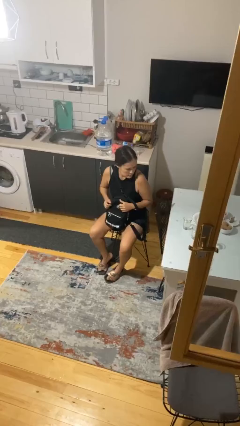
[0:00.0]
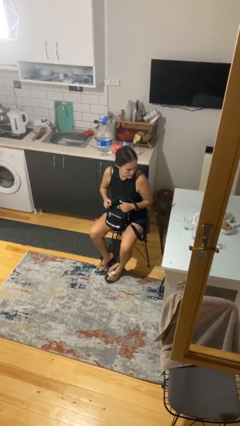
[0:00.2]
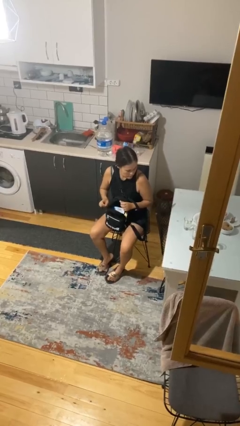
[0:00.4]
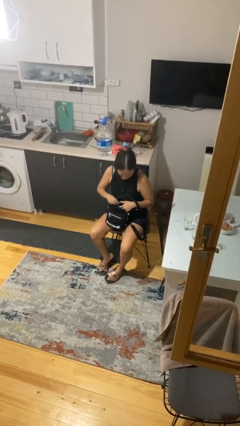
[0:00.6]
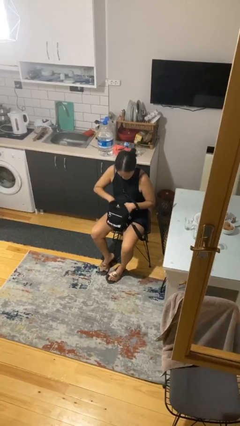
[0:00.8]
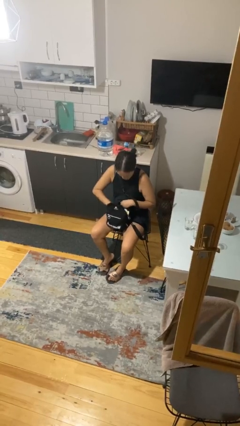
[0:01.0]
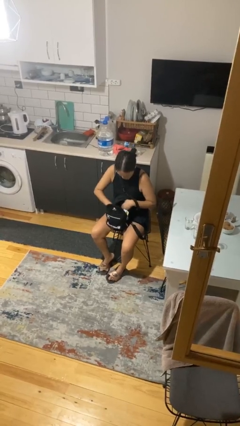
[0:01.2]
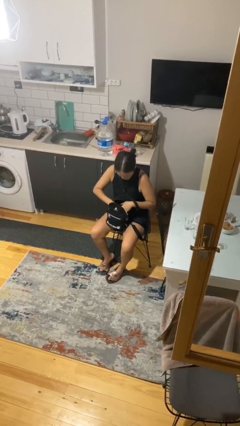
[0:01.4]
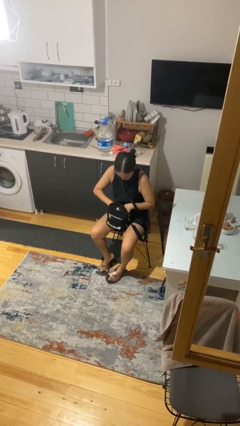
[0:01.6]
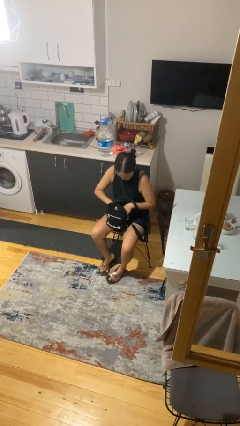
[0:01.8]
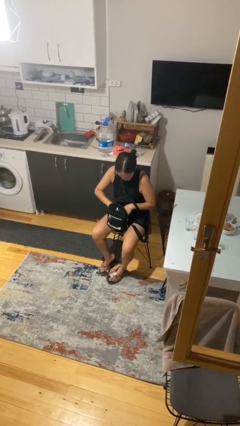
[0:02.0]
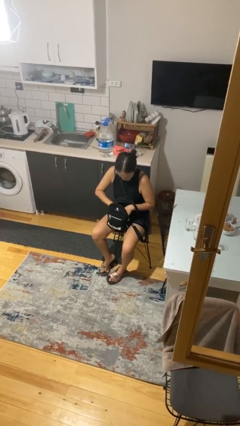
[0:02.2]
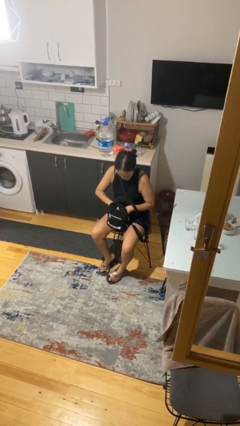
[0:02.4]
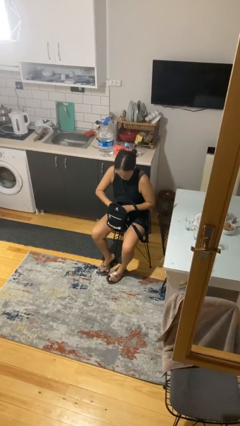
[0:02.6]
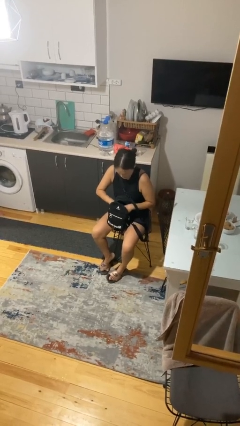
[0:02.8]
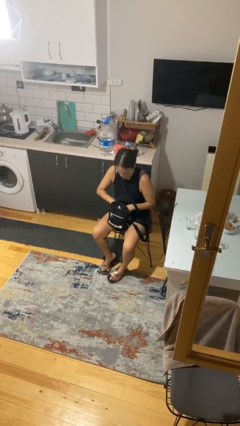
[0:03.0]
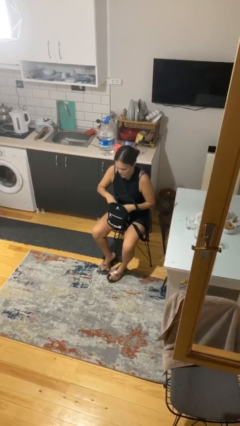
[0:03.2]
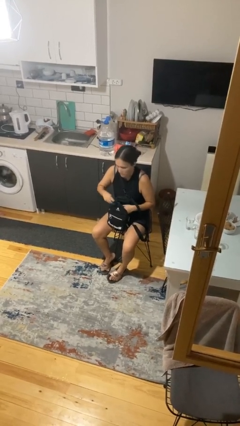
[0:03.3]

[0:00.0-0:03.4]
person searches in backpack

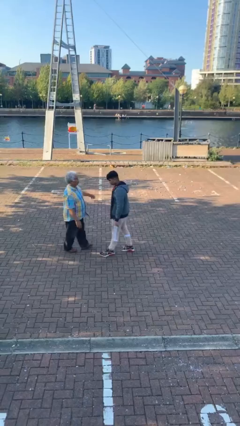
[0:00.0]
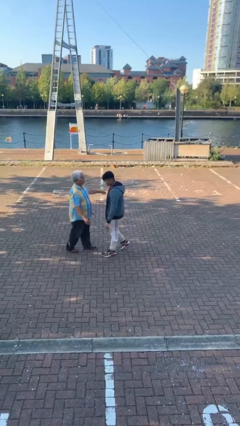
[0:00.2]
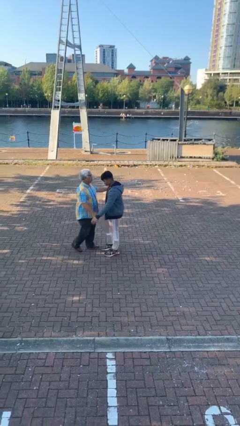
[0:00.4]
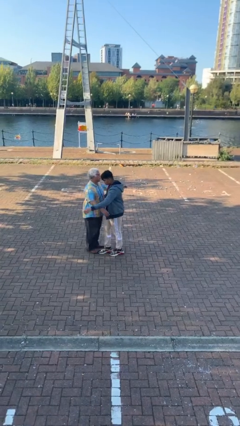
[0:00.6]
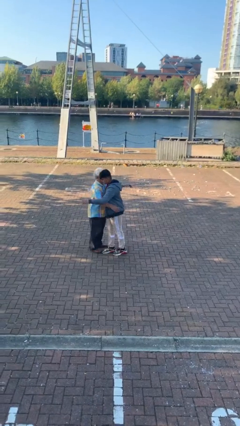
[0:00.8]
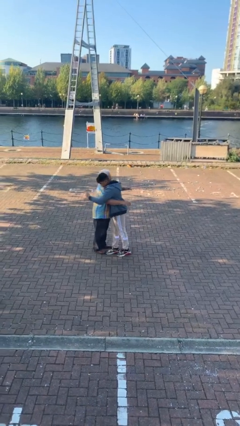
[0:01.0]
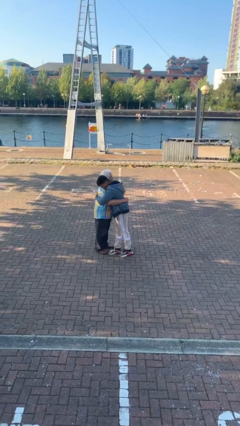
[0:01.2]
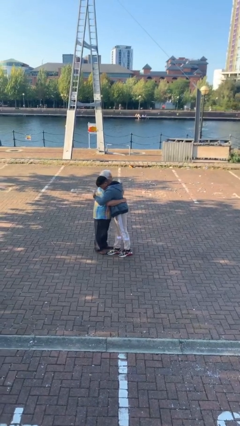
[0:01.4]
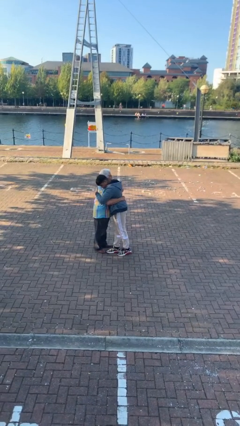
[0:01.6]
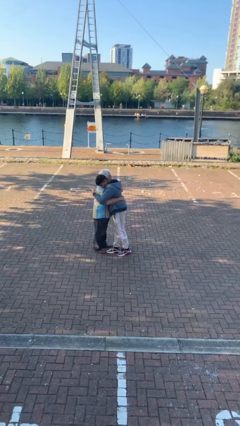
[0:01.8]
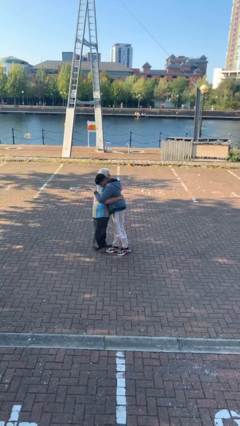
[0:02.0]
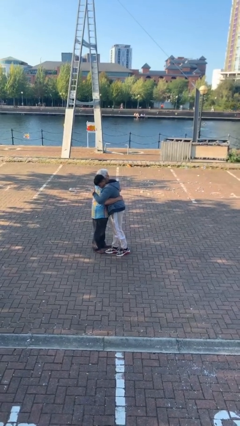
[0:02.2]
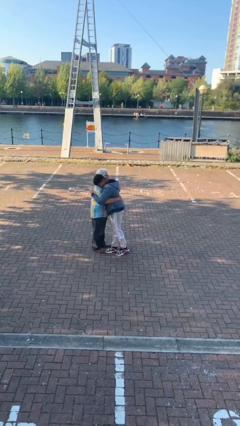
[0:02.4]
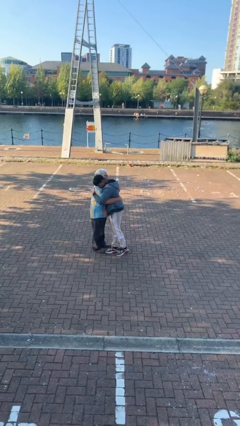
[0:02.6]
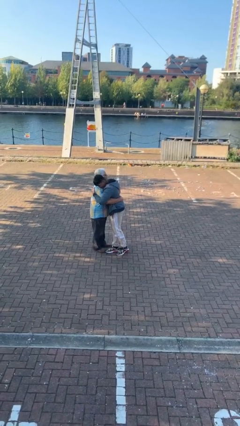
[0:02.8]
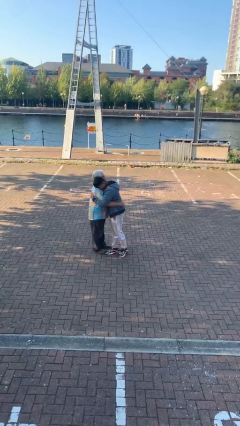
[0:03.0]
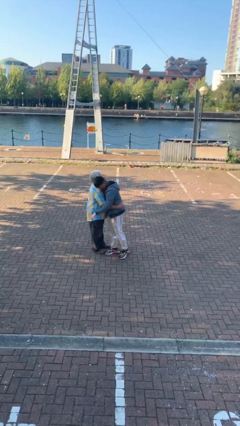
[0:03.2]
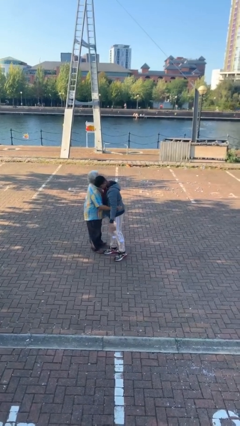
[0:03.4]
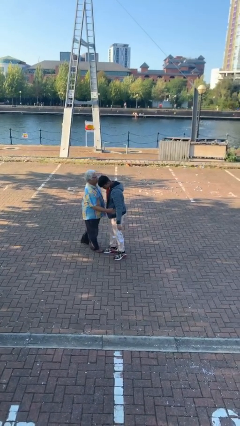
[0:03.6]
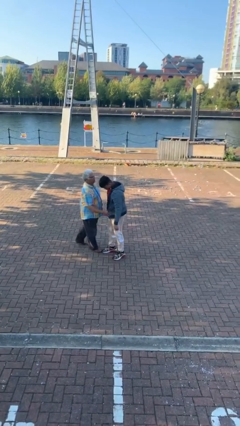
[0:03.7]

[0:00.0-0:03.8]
person embraces person

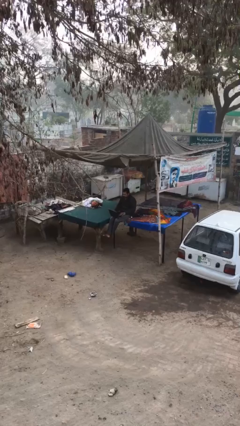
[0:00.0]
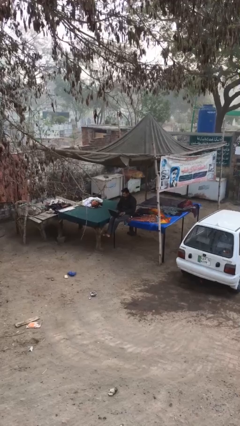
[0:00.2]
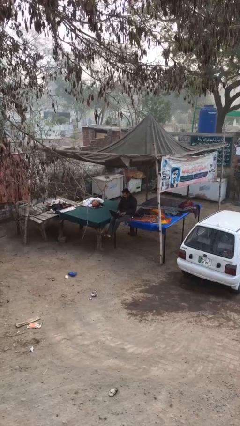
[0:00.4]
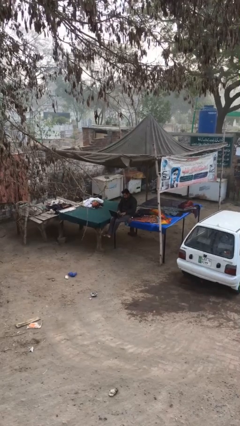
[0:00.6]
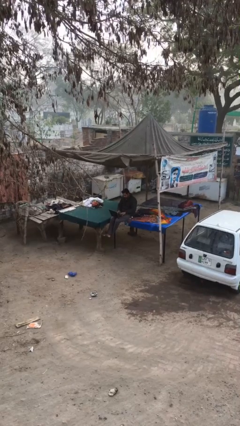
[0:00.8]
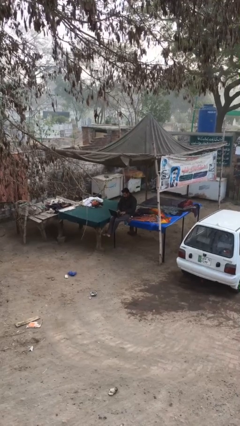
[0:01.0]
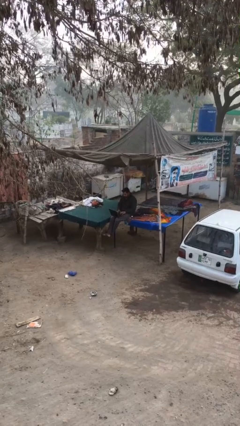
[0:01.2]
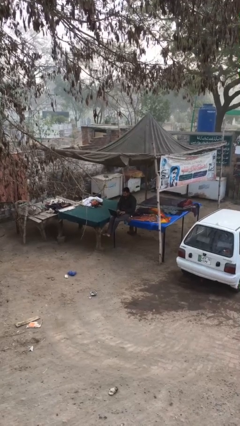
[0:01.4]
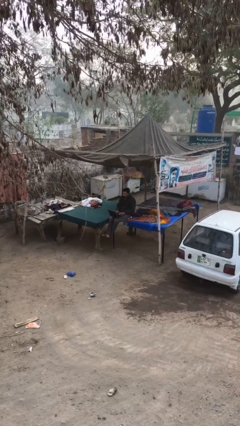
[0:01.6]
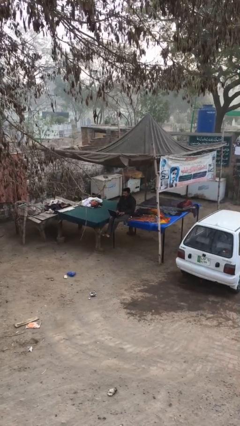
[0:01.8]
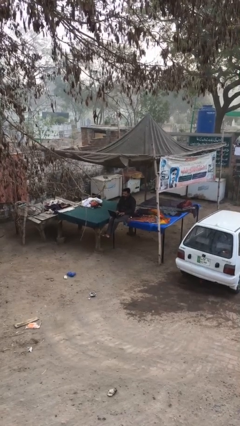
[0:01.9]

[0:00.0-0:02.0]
person interacts with laptop

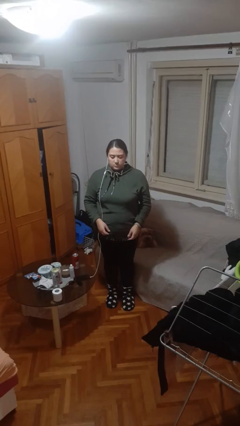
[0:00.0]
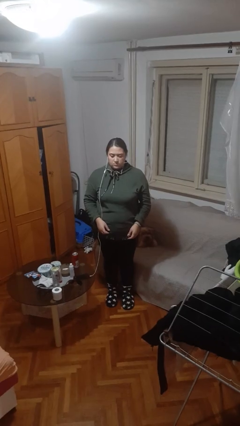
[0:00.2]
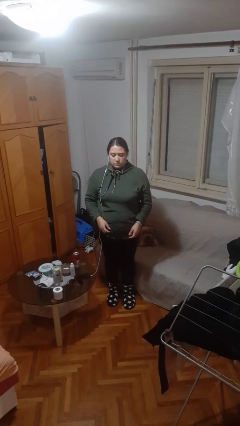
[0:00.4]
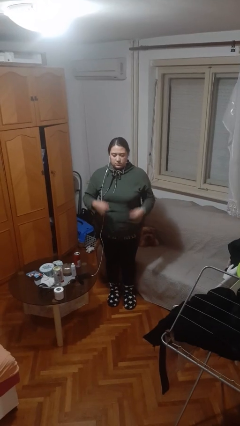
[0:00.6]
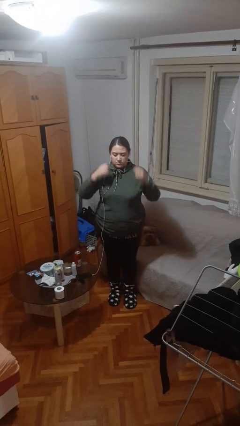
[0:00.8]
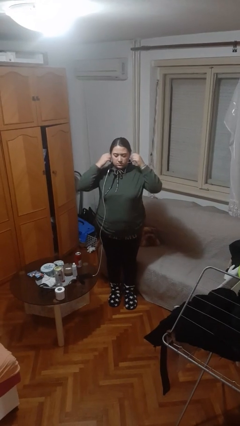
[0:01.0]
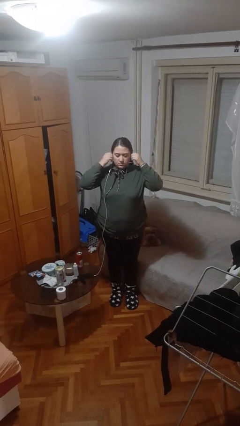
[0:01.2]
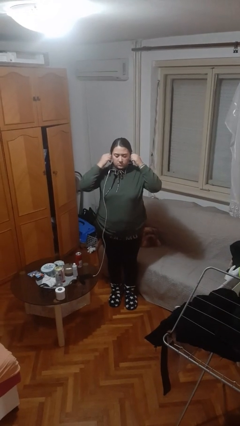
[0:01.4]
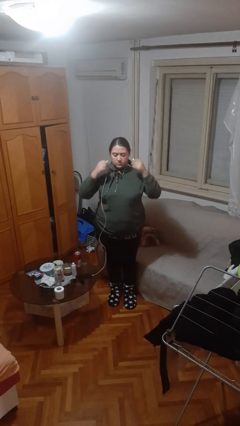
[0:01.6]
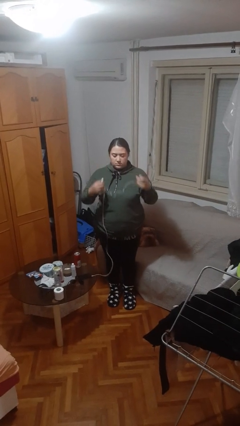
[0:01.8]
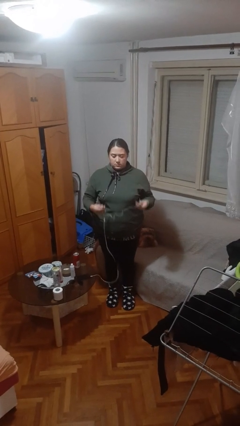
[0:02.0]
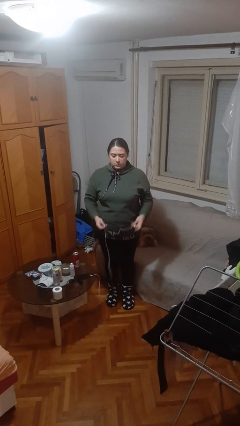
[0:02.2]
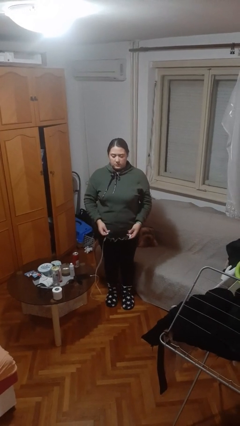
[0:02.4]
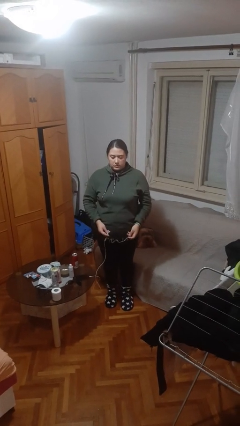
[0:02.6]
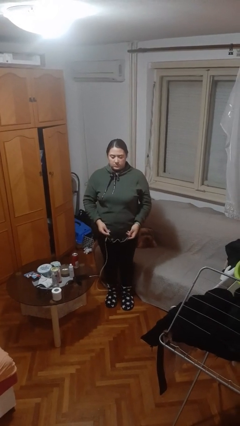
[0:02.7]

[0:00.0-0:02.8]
person takes off headphones

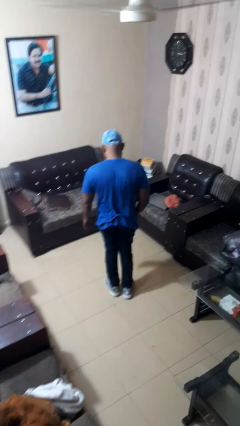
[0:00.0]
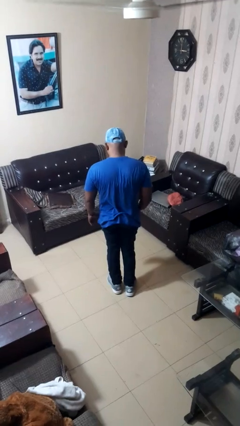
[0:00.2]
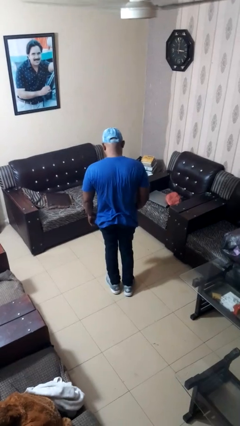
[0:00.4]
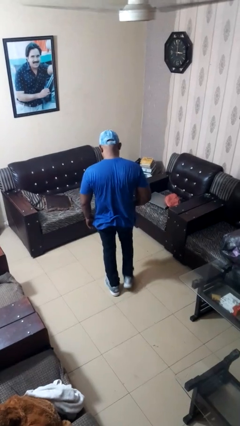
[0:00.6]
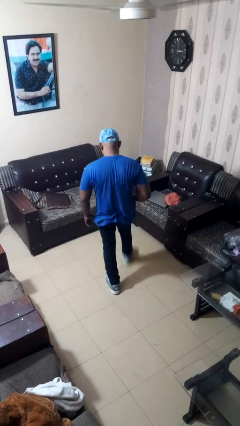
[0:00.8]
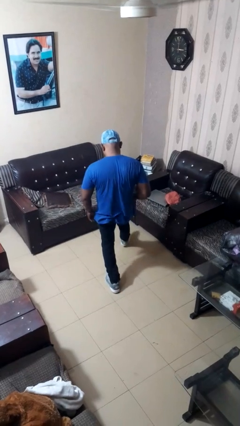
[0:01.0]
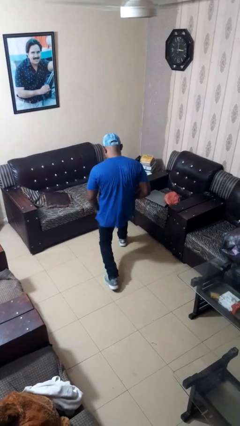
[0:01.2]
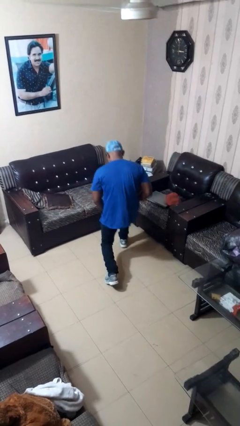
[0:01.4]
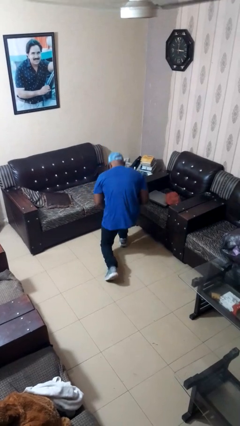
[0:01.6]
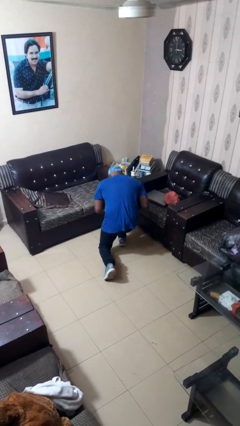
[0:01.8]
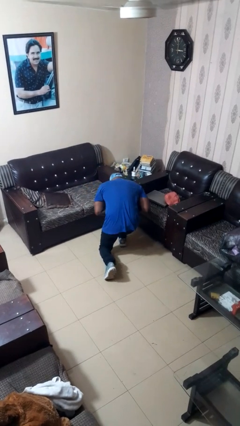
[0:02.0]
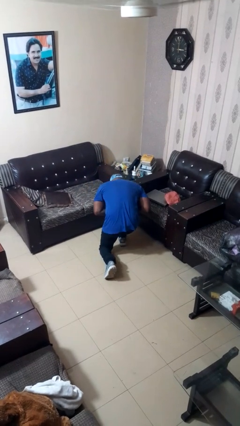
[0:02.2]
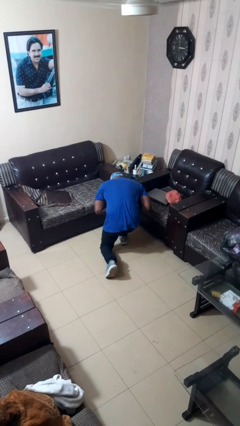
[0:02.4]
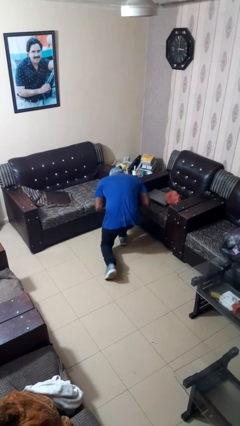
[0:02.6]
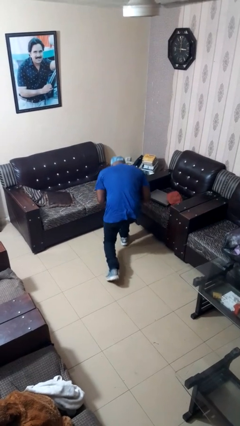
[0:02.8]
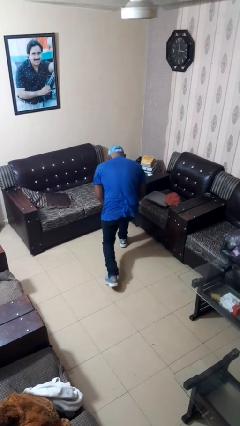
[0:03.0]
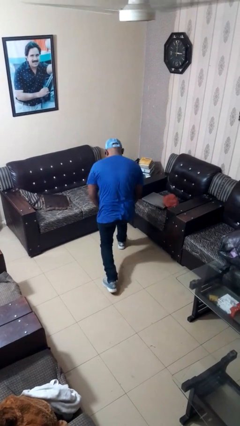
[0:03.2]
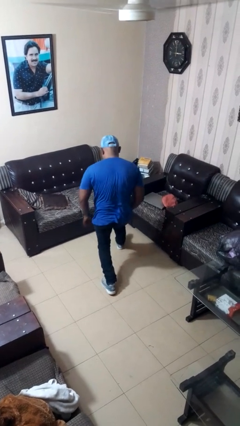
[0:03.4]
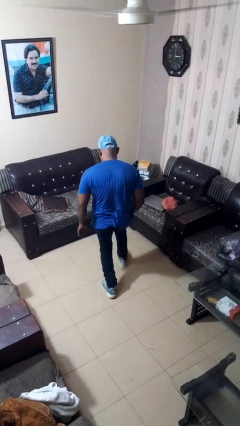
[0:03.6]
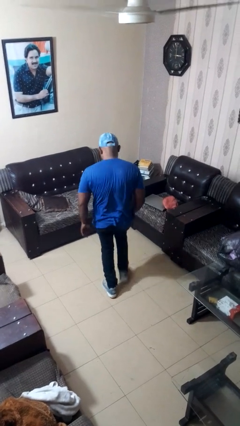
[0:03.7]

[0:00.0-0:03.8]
person exercises with lunges

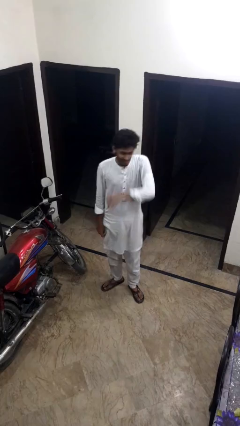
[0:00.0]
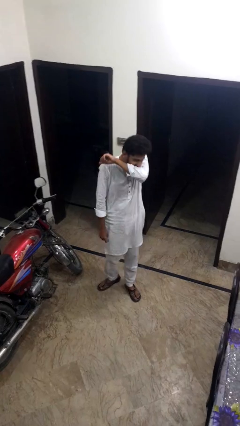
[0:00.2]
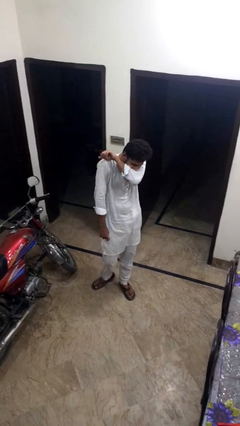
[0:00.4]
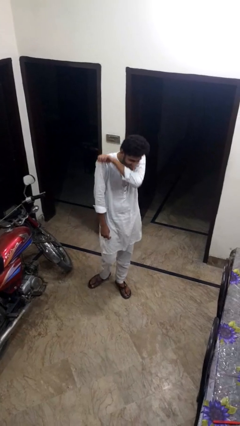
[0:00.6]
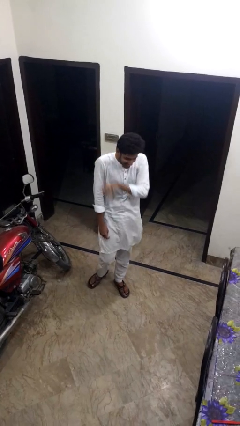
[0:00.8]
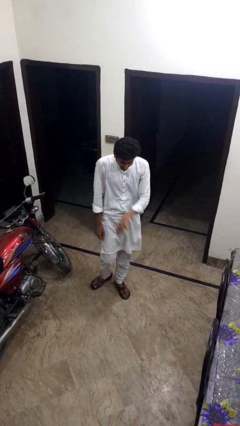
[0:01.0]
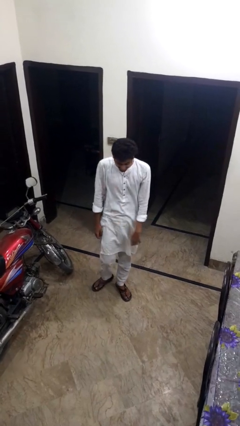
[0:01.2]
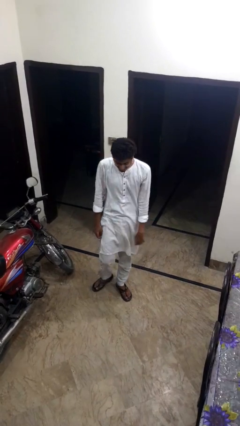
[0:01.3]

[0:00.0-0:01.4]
person sneezes into arm
